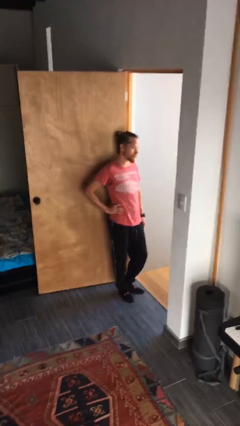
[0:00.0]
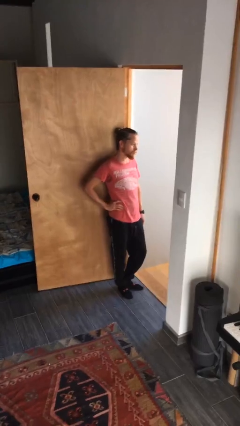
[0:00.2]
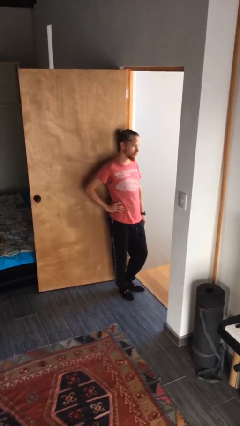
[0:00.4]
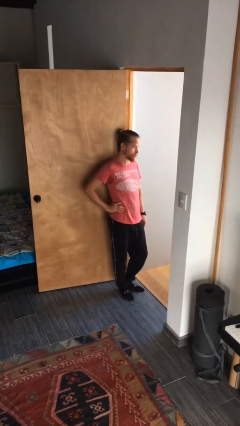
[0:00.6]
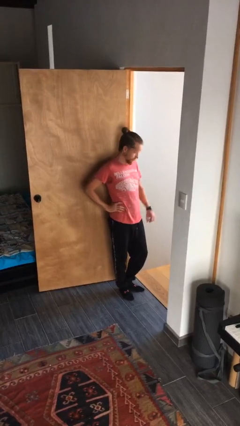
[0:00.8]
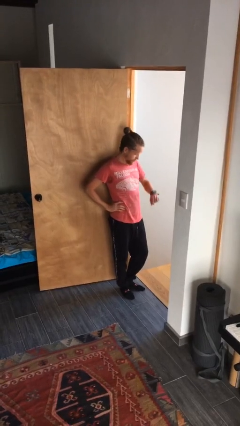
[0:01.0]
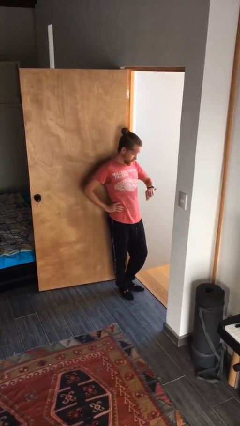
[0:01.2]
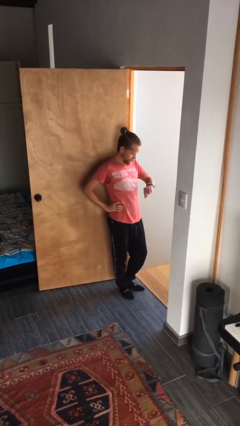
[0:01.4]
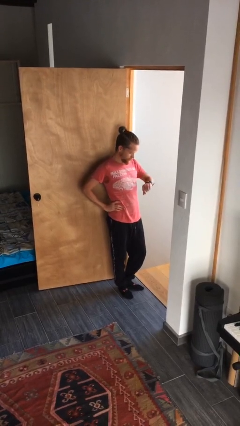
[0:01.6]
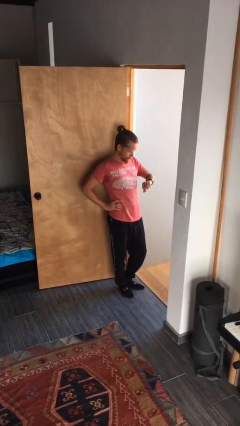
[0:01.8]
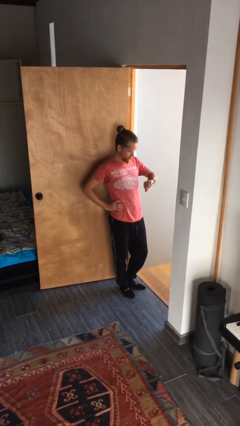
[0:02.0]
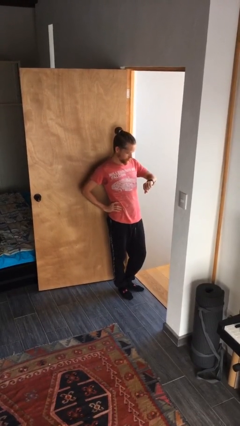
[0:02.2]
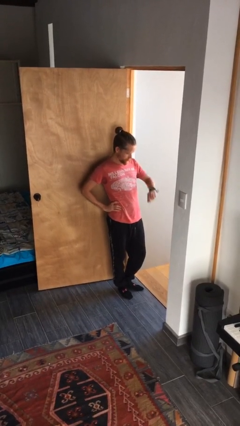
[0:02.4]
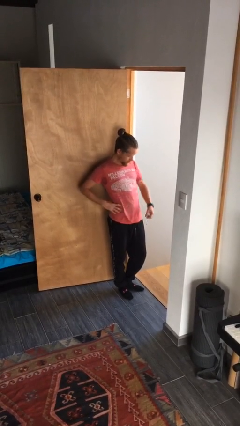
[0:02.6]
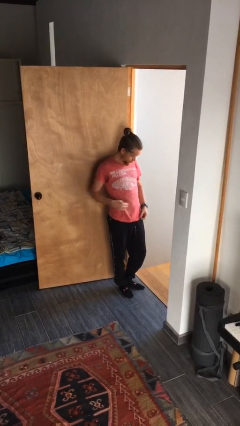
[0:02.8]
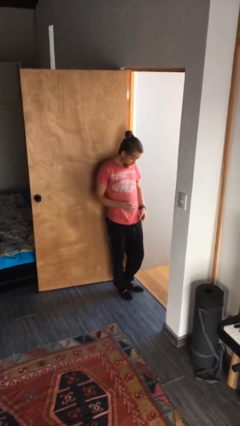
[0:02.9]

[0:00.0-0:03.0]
person looks at wristwatch

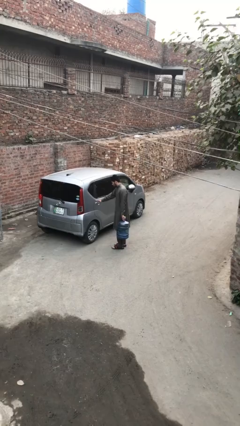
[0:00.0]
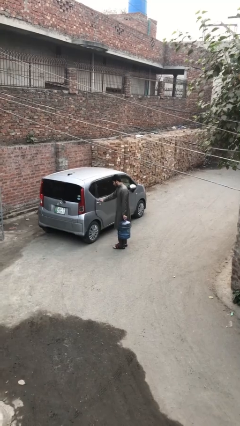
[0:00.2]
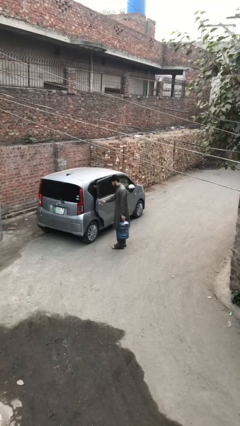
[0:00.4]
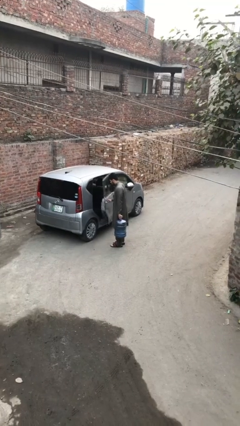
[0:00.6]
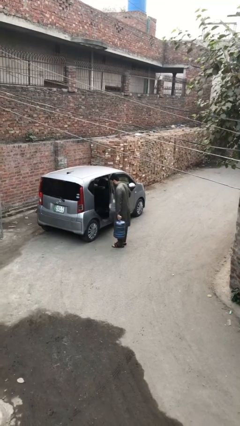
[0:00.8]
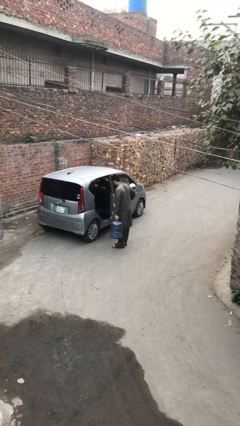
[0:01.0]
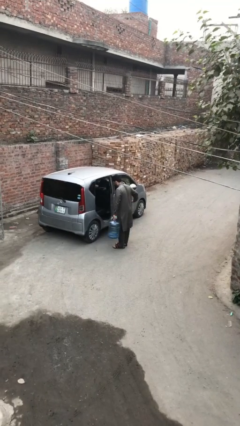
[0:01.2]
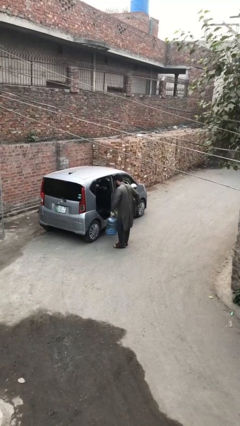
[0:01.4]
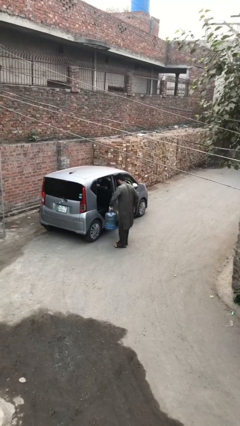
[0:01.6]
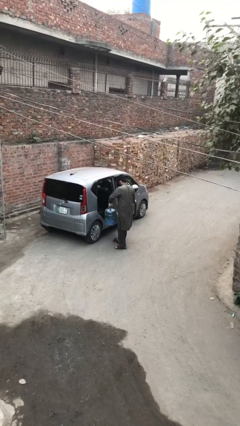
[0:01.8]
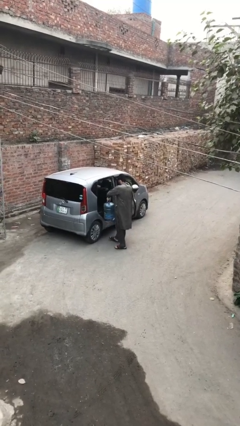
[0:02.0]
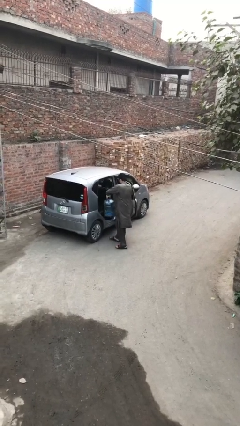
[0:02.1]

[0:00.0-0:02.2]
person opens car door

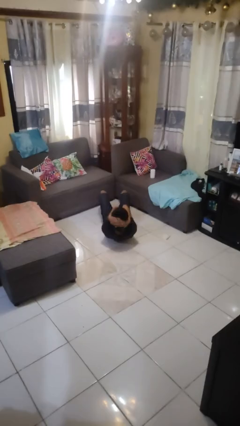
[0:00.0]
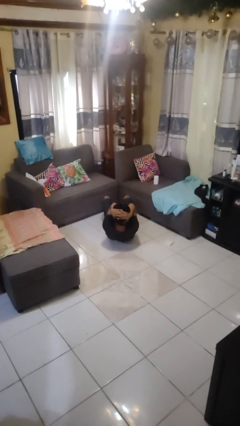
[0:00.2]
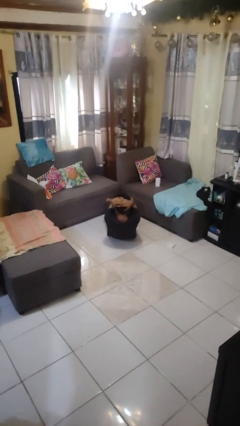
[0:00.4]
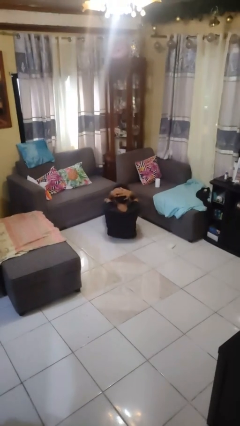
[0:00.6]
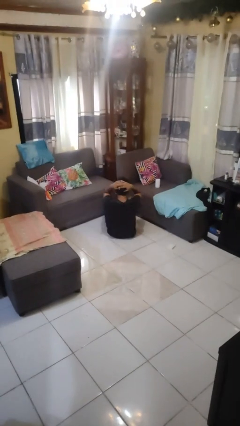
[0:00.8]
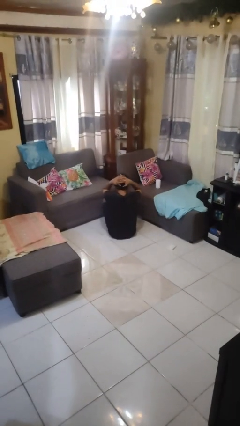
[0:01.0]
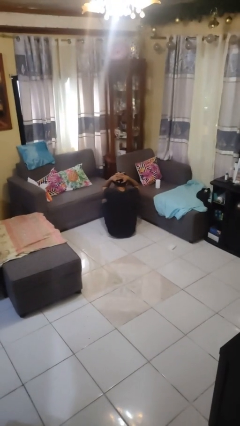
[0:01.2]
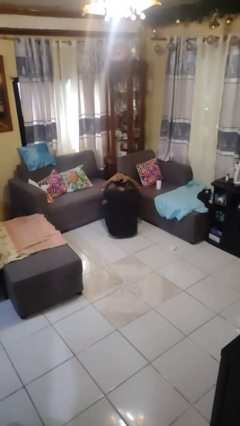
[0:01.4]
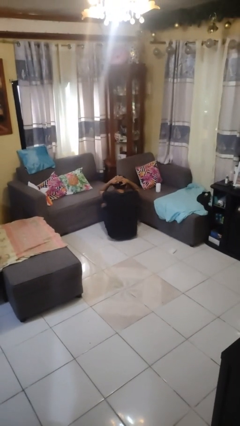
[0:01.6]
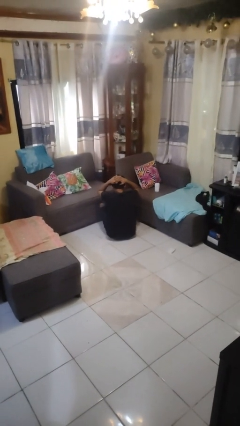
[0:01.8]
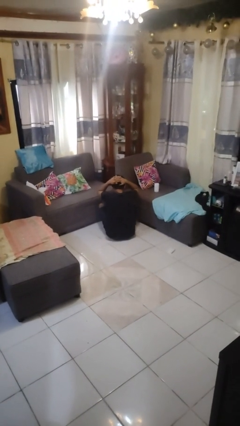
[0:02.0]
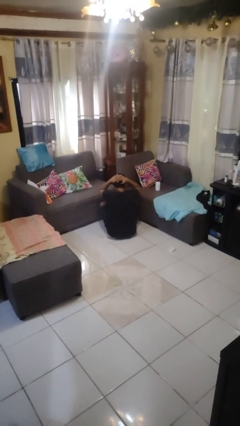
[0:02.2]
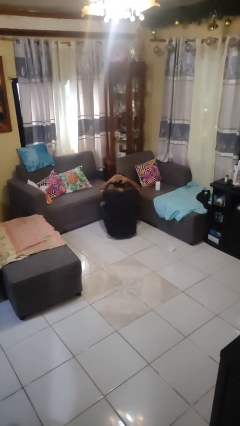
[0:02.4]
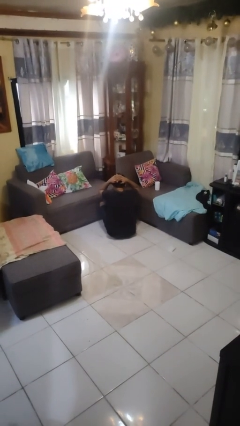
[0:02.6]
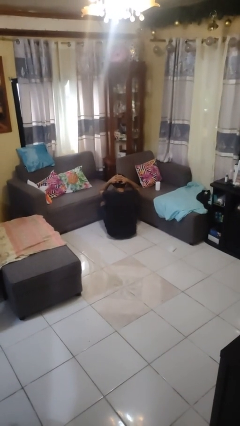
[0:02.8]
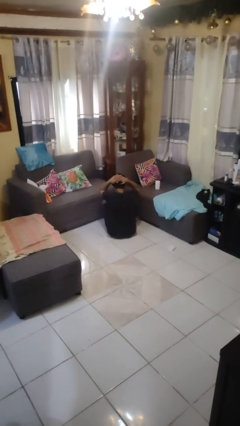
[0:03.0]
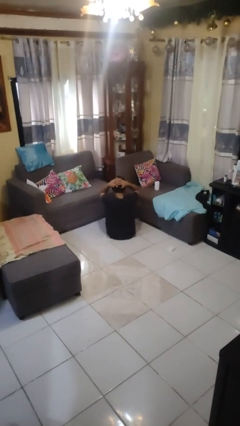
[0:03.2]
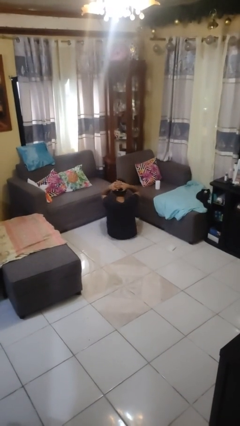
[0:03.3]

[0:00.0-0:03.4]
person exercises with situp

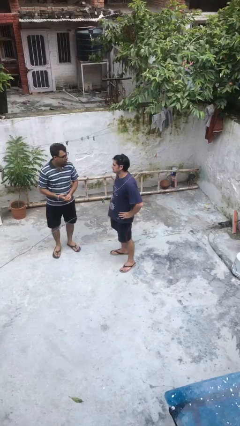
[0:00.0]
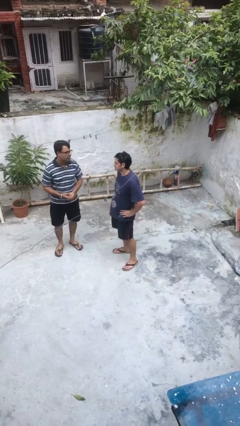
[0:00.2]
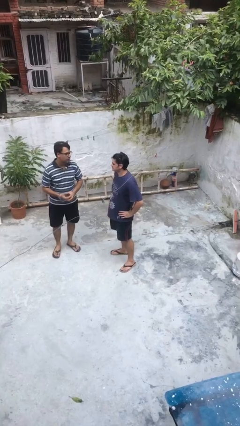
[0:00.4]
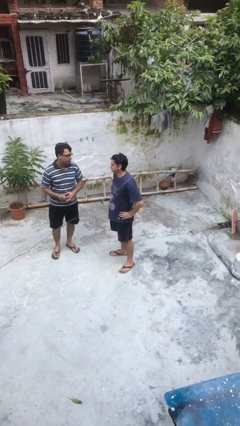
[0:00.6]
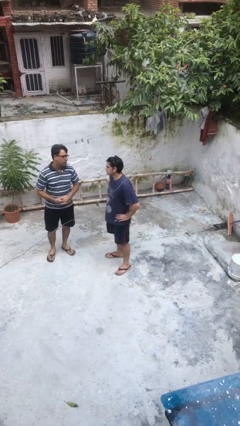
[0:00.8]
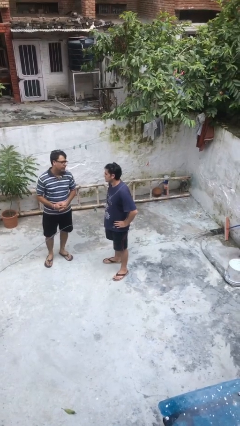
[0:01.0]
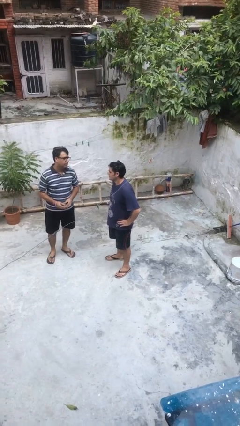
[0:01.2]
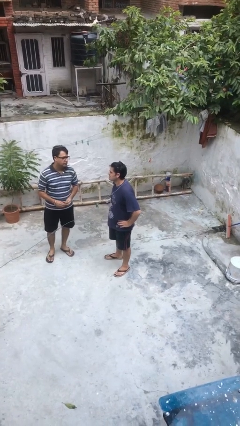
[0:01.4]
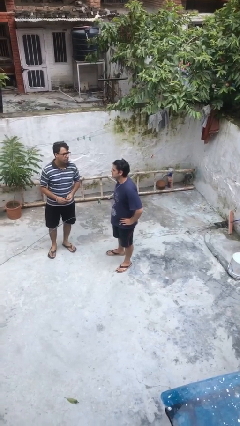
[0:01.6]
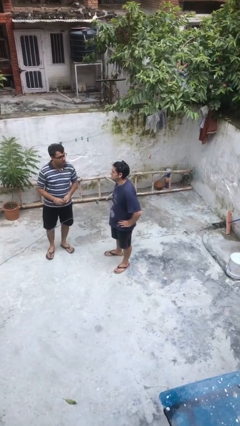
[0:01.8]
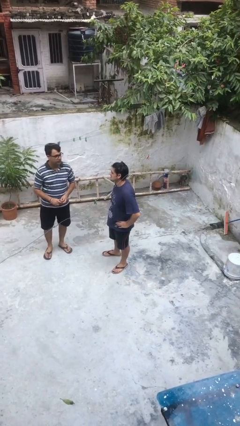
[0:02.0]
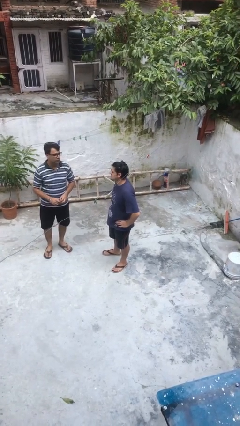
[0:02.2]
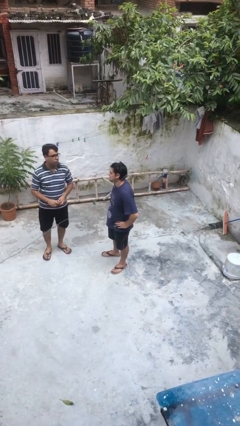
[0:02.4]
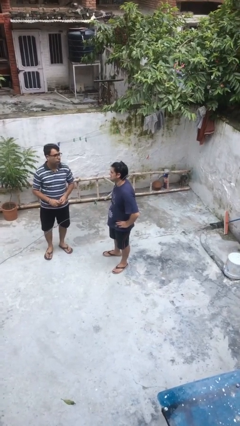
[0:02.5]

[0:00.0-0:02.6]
person talks to person

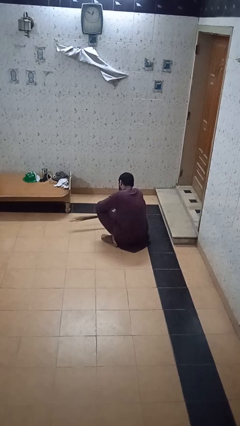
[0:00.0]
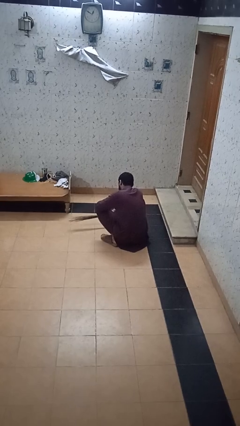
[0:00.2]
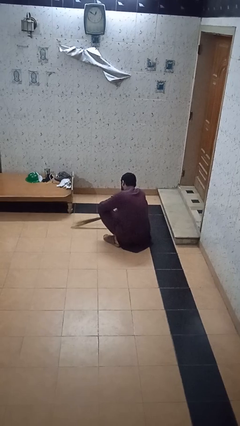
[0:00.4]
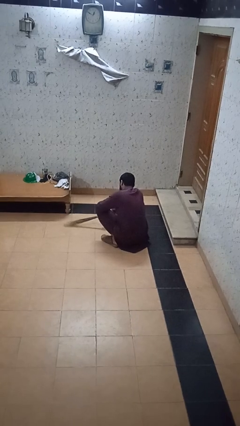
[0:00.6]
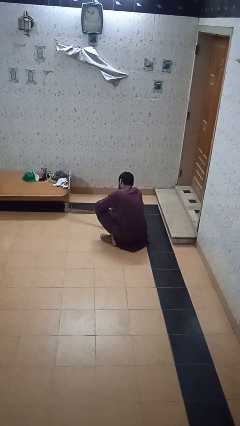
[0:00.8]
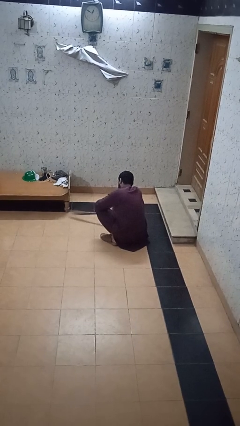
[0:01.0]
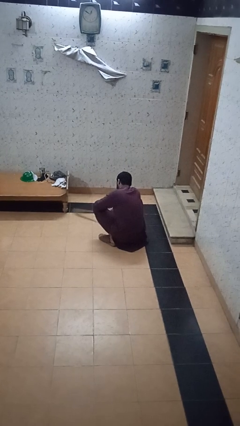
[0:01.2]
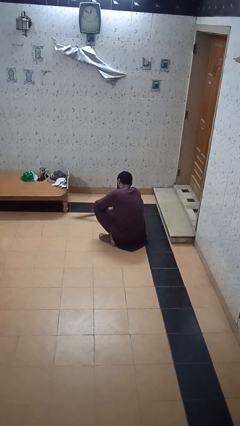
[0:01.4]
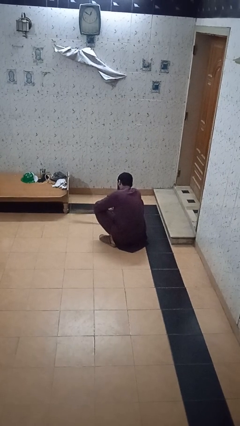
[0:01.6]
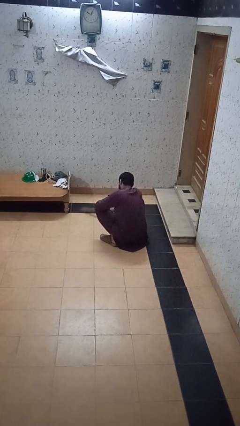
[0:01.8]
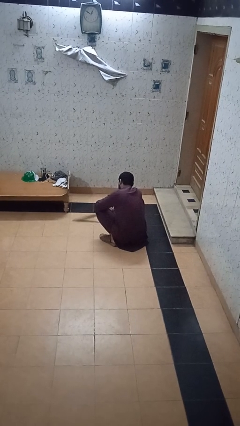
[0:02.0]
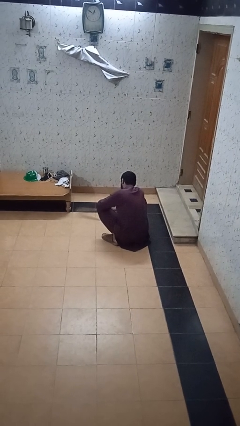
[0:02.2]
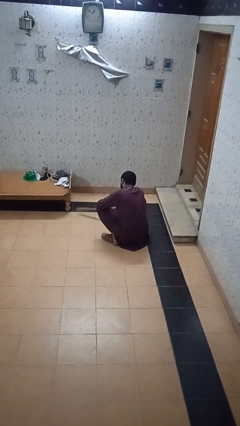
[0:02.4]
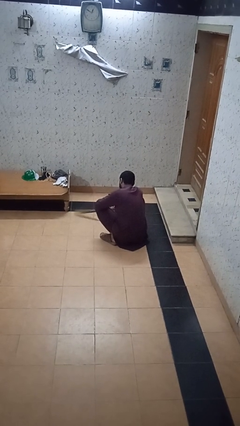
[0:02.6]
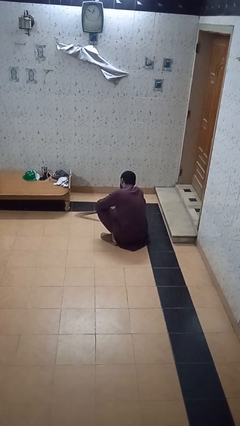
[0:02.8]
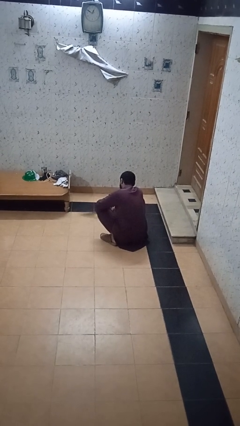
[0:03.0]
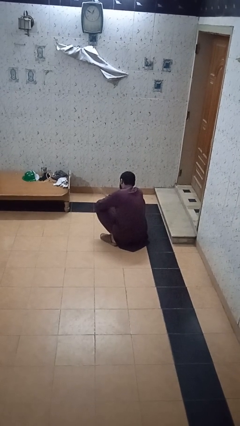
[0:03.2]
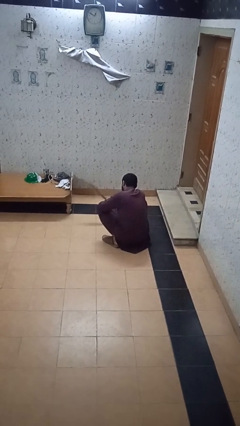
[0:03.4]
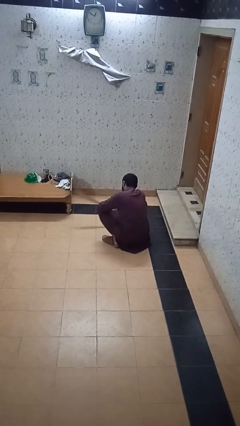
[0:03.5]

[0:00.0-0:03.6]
person sweeps floor

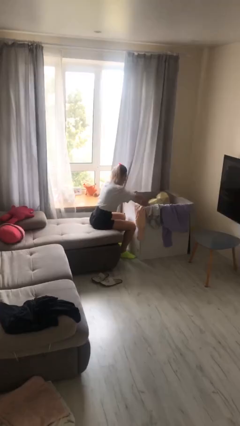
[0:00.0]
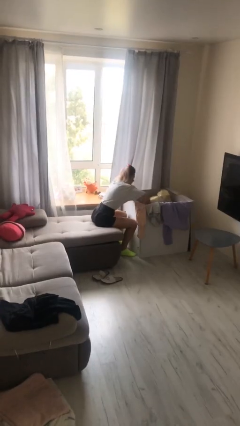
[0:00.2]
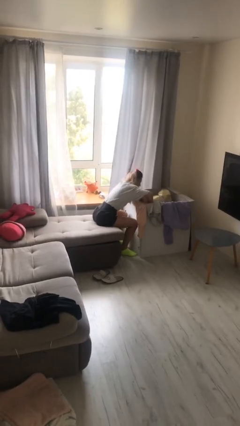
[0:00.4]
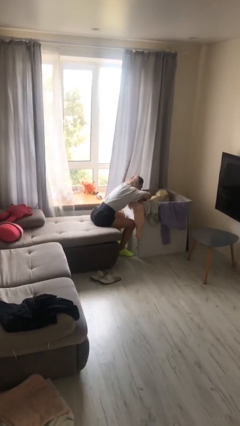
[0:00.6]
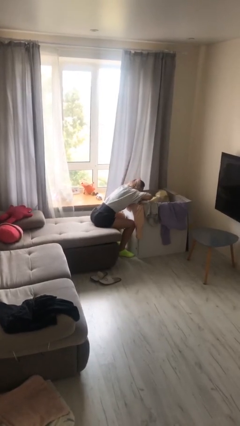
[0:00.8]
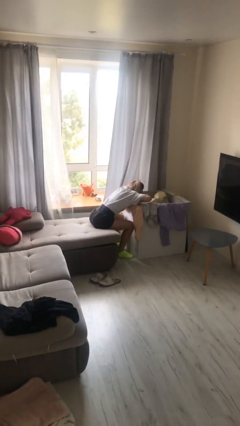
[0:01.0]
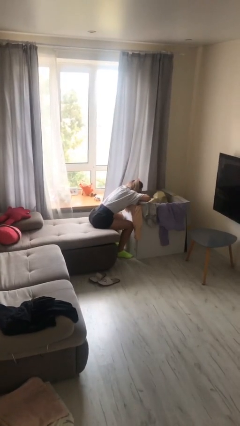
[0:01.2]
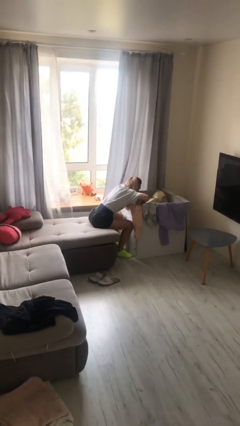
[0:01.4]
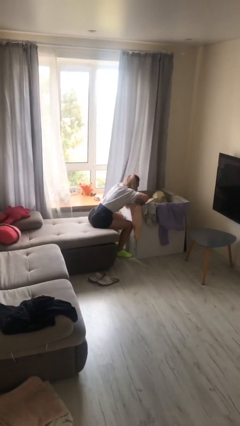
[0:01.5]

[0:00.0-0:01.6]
person searches in box

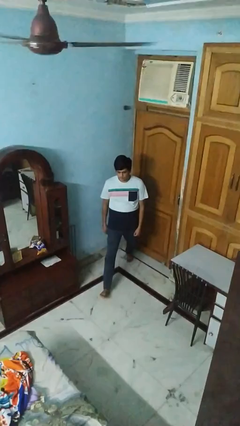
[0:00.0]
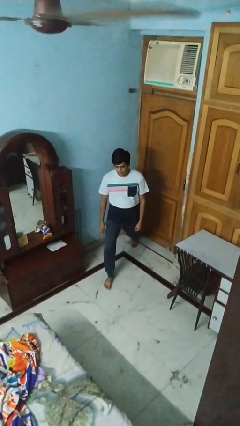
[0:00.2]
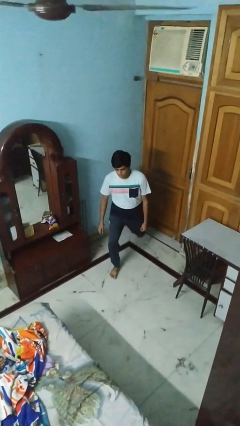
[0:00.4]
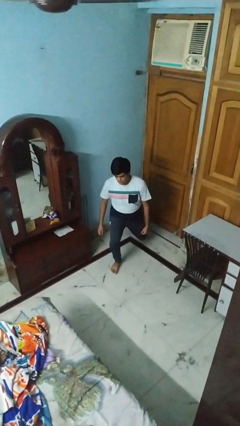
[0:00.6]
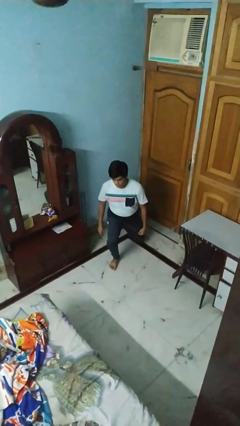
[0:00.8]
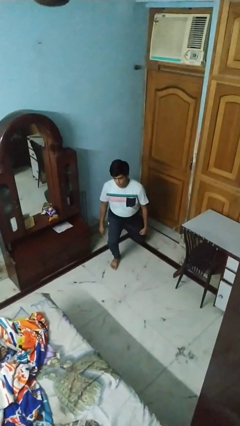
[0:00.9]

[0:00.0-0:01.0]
person exercises with lunges

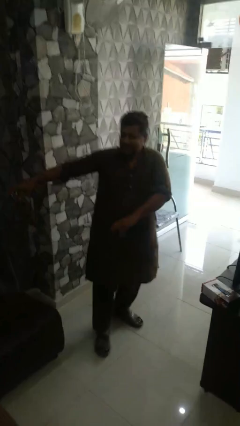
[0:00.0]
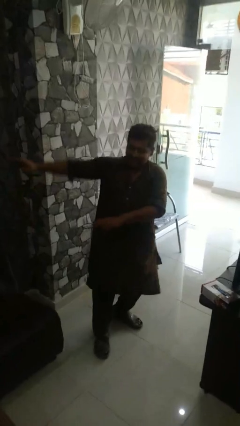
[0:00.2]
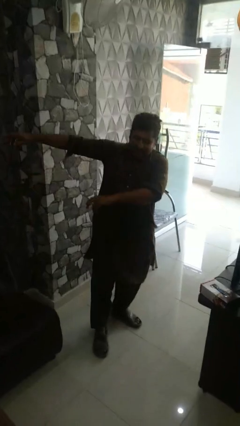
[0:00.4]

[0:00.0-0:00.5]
person dances in place
